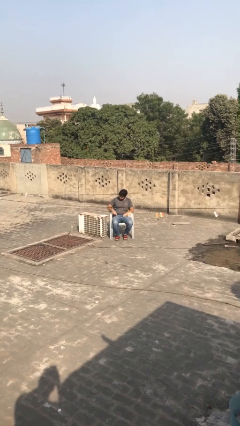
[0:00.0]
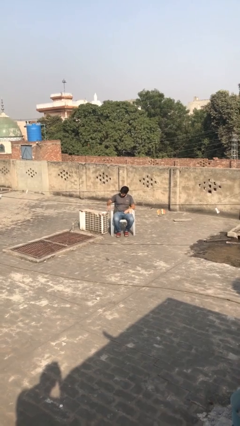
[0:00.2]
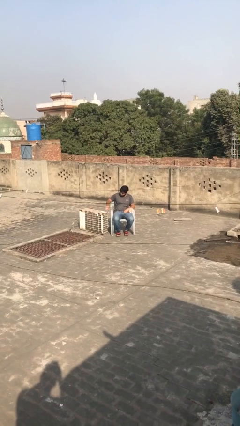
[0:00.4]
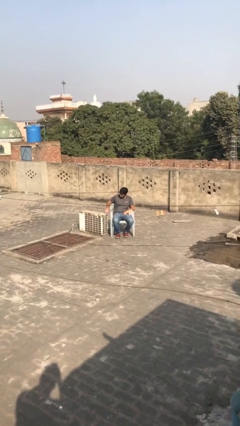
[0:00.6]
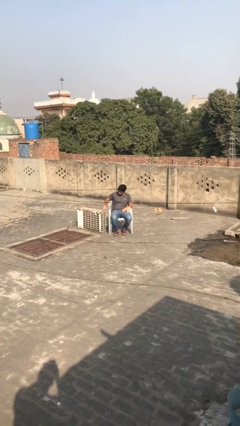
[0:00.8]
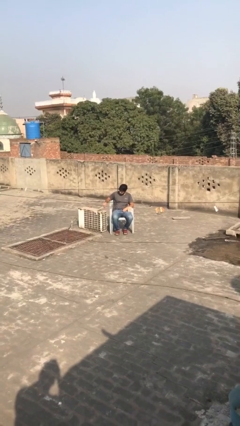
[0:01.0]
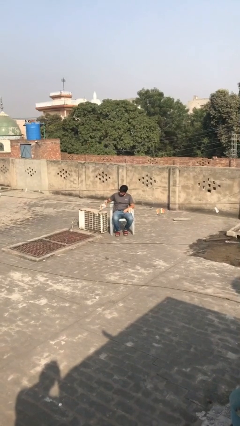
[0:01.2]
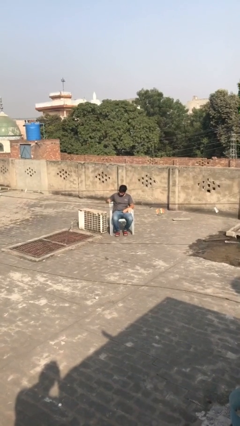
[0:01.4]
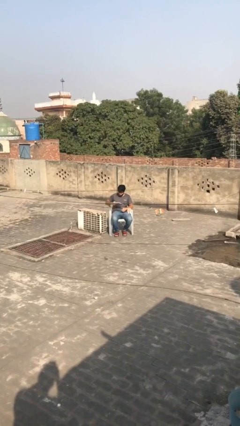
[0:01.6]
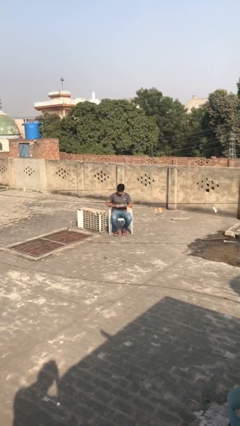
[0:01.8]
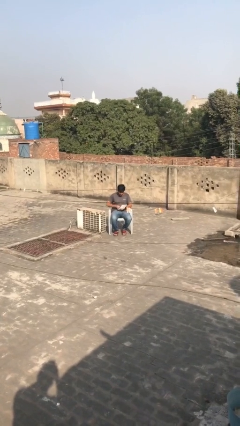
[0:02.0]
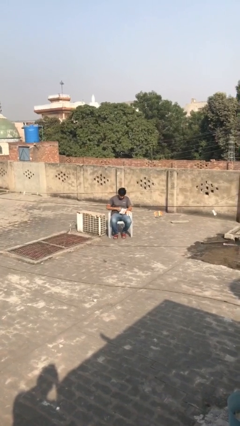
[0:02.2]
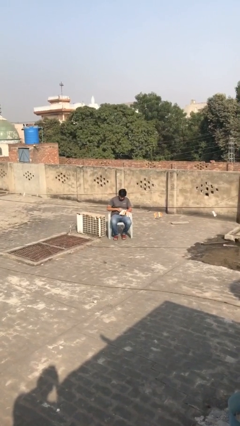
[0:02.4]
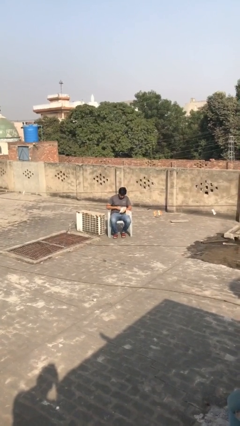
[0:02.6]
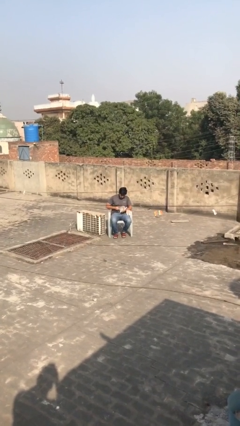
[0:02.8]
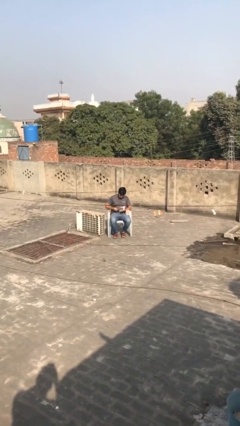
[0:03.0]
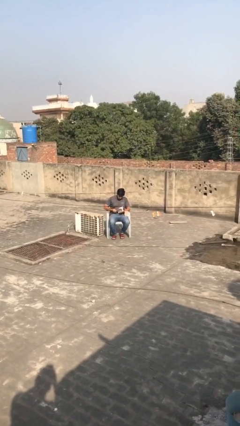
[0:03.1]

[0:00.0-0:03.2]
person picks up object from table

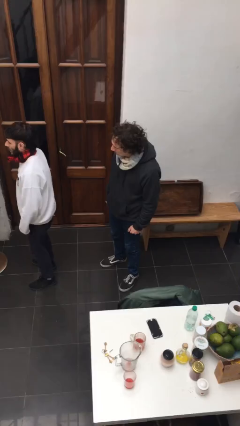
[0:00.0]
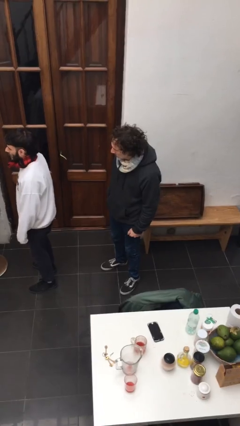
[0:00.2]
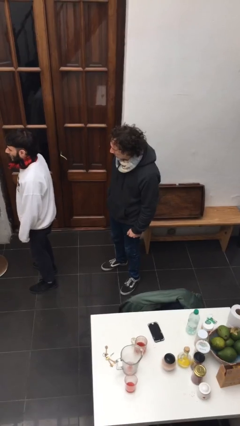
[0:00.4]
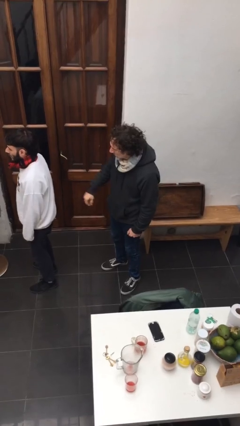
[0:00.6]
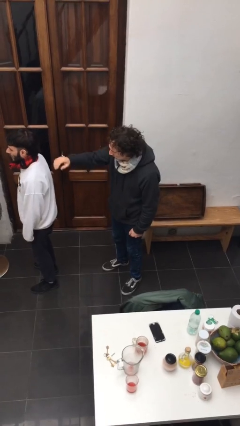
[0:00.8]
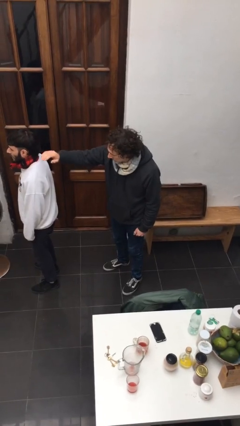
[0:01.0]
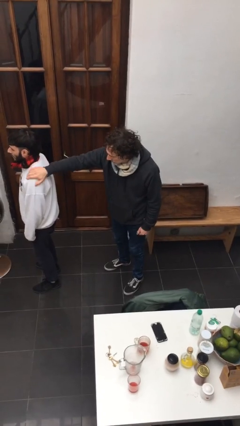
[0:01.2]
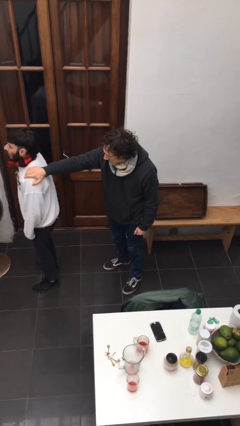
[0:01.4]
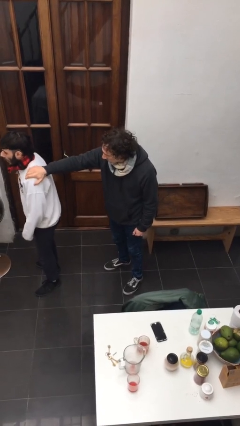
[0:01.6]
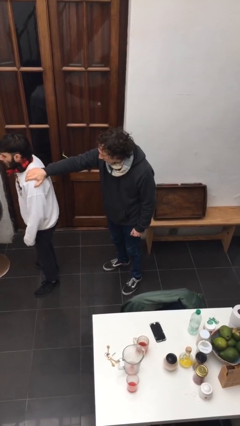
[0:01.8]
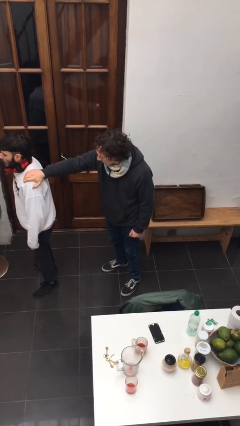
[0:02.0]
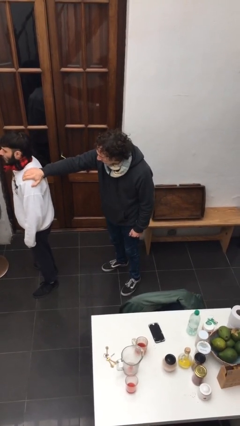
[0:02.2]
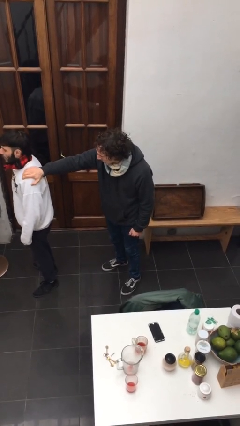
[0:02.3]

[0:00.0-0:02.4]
person grabs person by shoulder

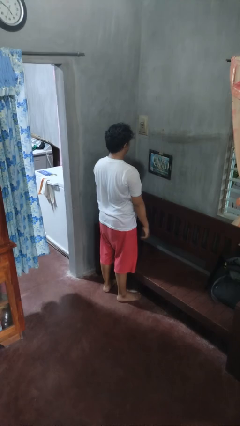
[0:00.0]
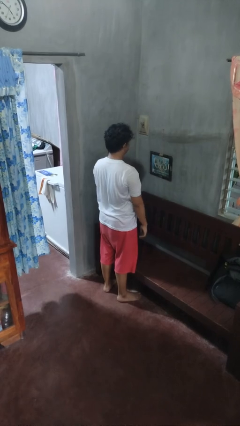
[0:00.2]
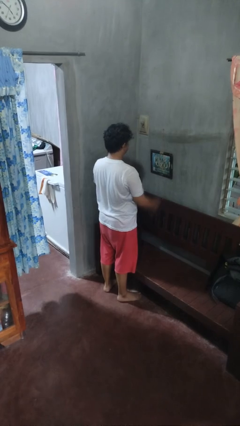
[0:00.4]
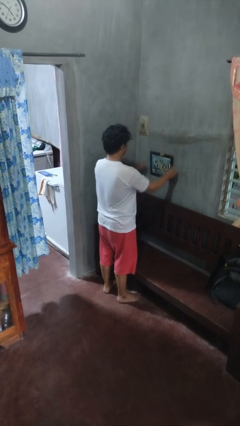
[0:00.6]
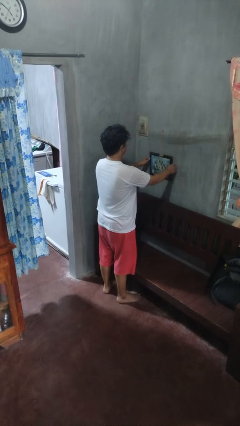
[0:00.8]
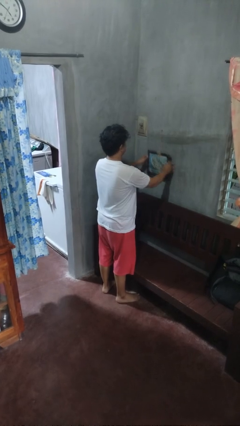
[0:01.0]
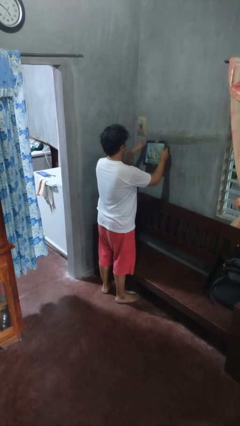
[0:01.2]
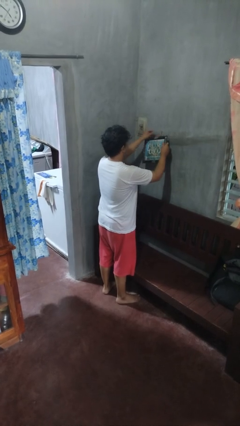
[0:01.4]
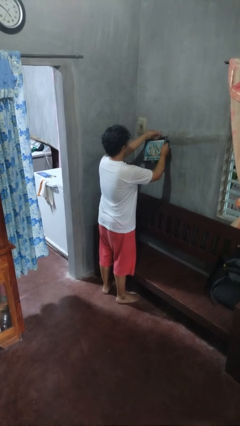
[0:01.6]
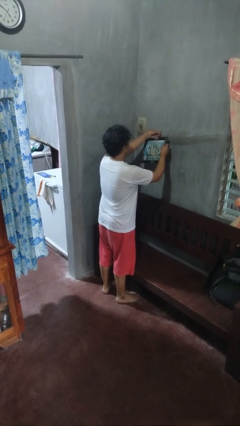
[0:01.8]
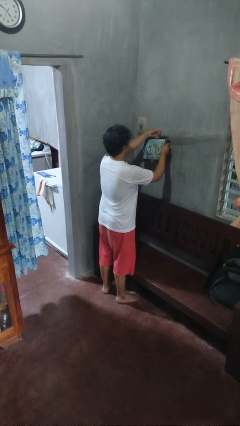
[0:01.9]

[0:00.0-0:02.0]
person takes down picture frame

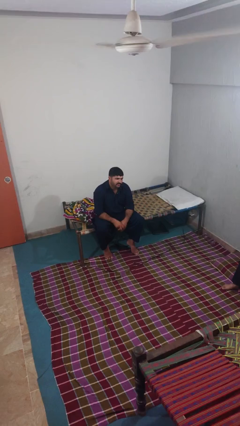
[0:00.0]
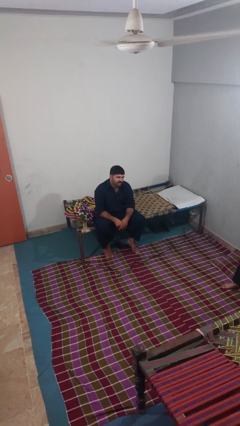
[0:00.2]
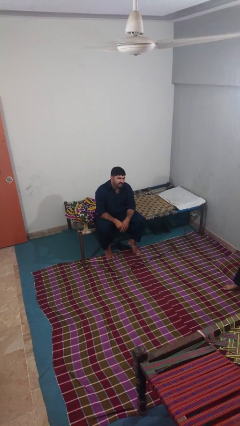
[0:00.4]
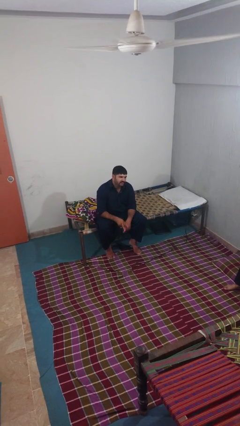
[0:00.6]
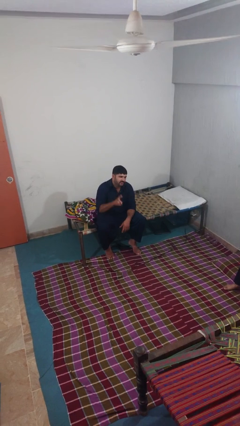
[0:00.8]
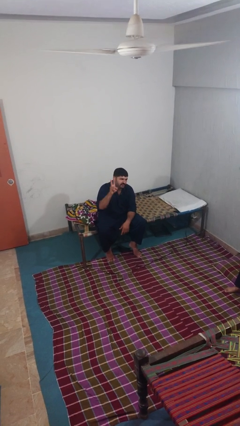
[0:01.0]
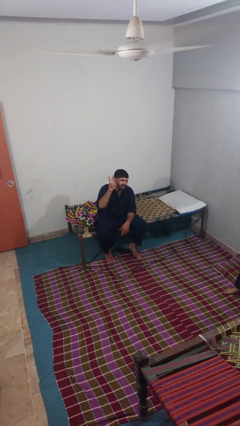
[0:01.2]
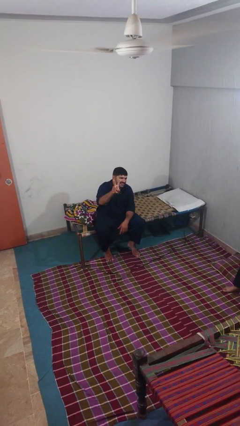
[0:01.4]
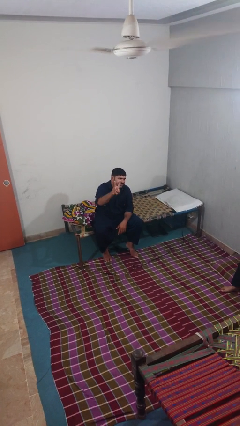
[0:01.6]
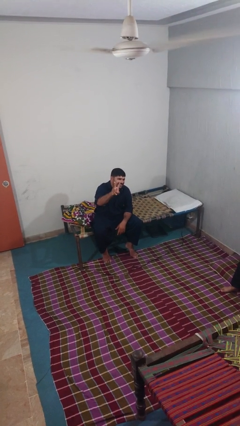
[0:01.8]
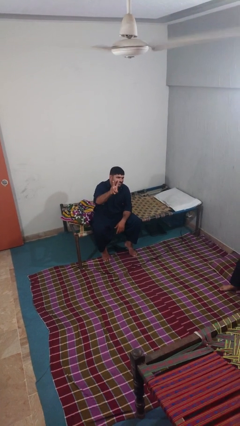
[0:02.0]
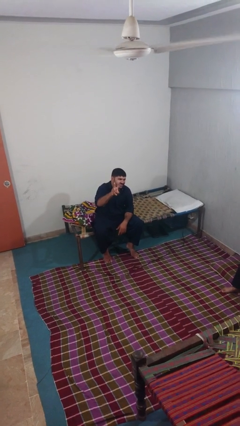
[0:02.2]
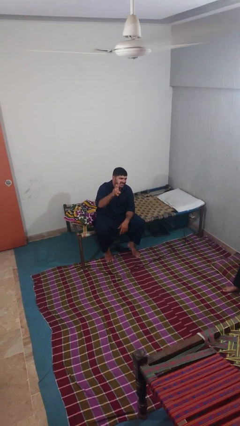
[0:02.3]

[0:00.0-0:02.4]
person gestures peace

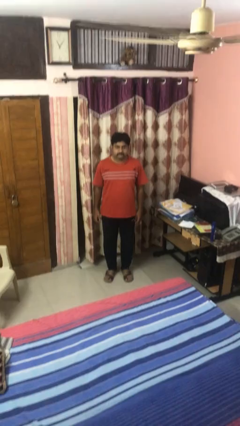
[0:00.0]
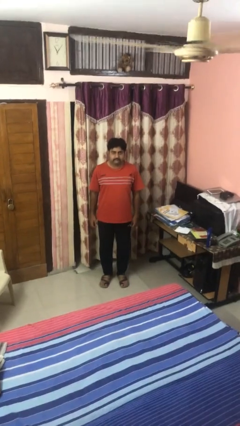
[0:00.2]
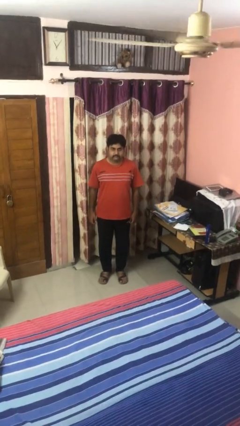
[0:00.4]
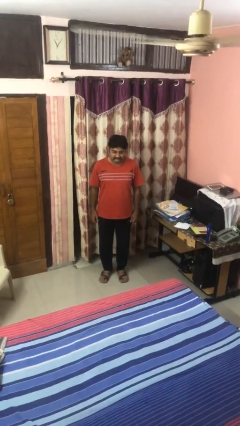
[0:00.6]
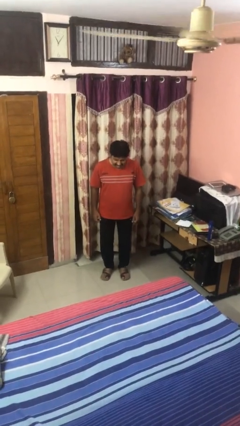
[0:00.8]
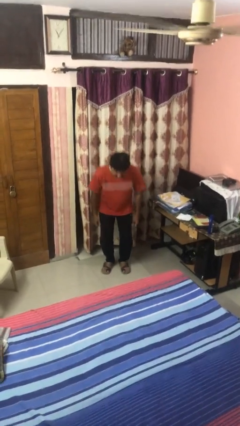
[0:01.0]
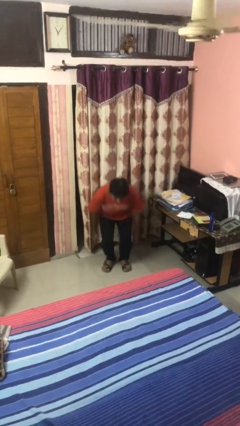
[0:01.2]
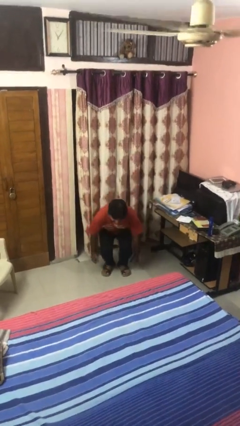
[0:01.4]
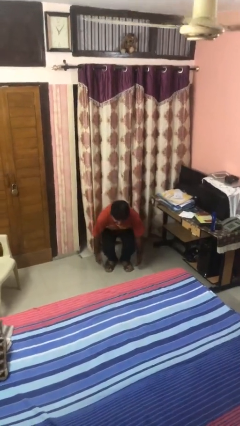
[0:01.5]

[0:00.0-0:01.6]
person squats

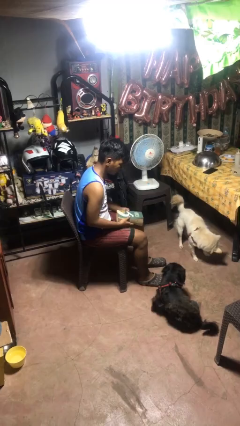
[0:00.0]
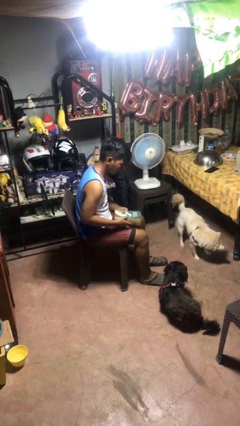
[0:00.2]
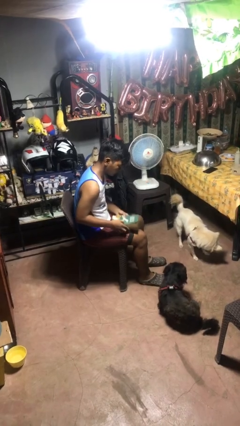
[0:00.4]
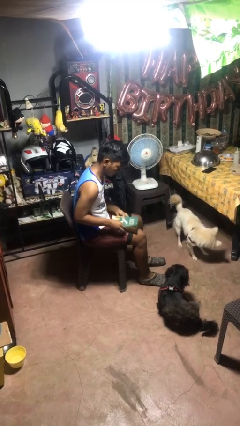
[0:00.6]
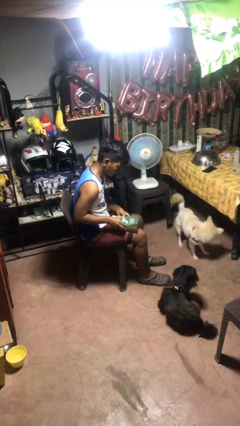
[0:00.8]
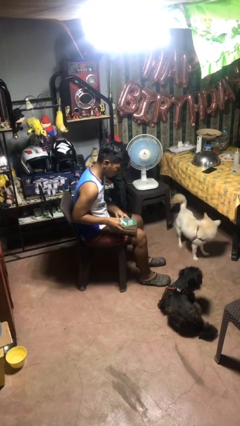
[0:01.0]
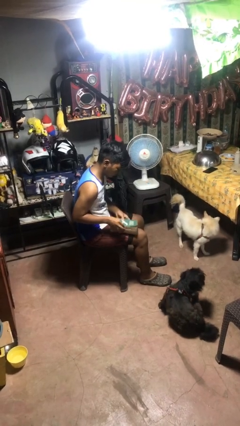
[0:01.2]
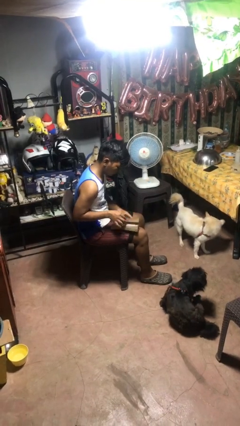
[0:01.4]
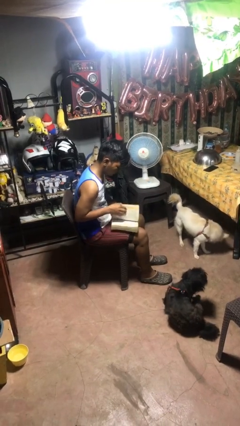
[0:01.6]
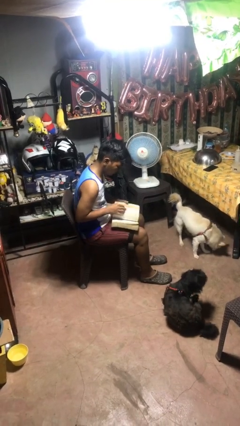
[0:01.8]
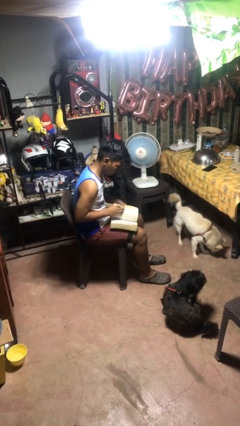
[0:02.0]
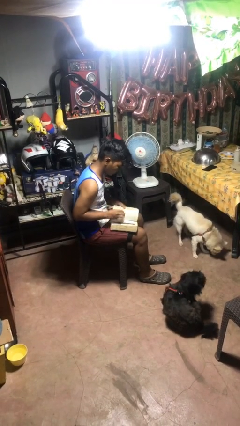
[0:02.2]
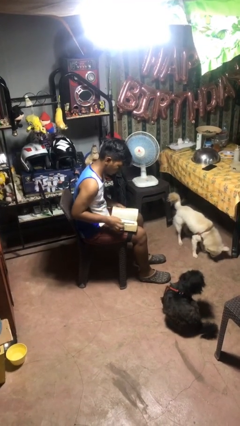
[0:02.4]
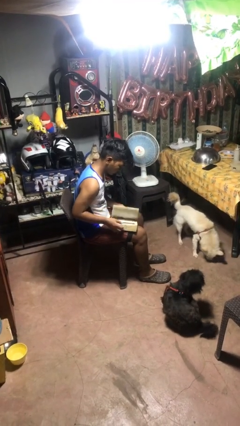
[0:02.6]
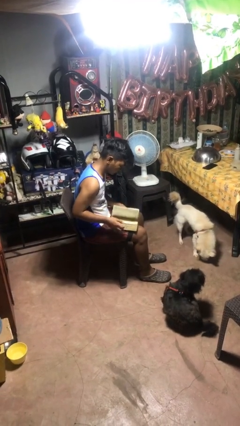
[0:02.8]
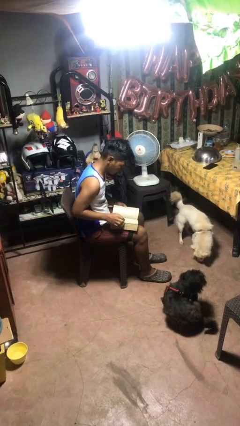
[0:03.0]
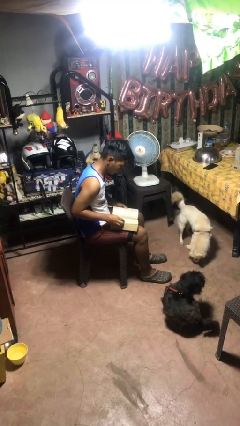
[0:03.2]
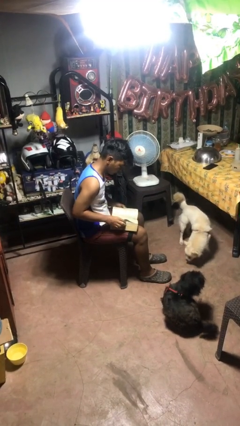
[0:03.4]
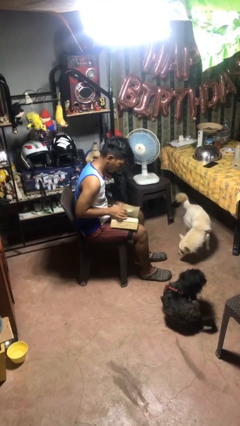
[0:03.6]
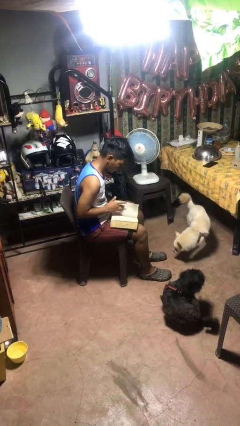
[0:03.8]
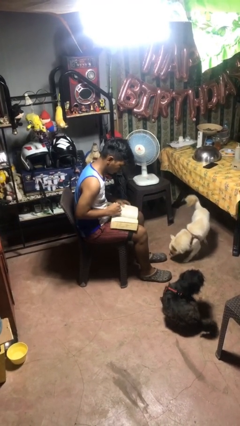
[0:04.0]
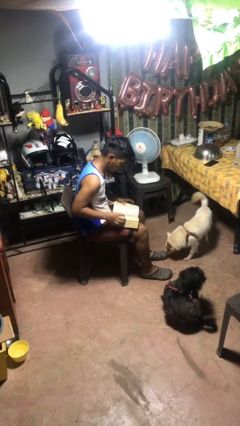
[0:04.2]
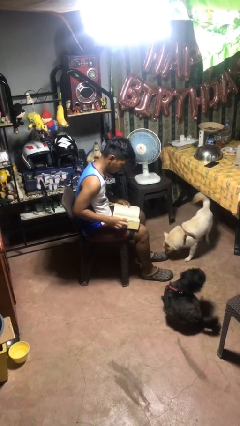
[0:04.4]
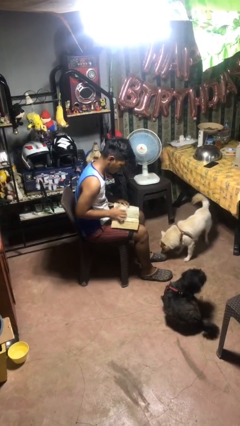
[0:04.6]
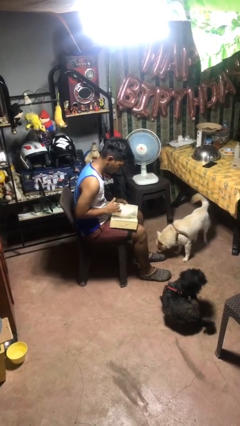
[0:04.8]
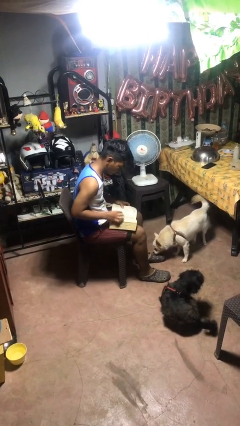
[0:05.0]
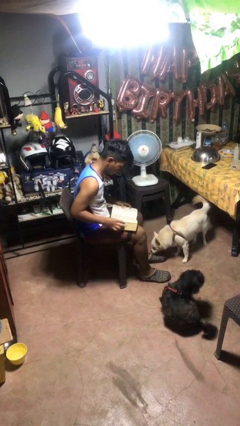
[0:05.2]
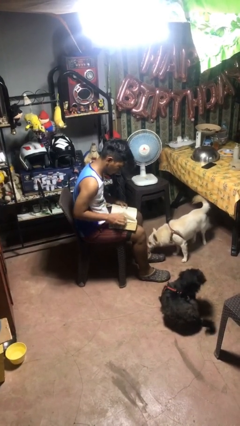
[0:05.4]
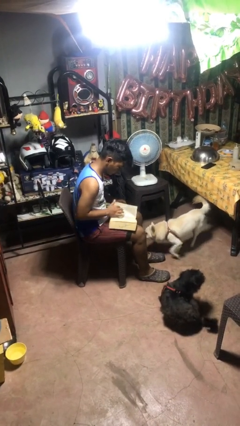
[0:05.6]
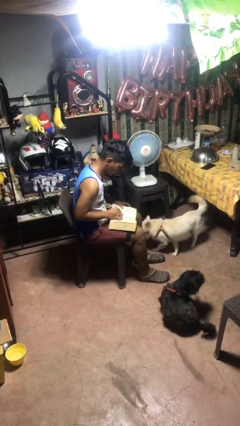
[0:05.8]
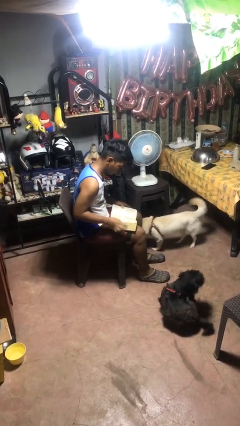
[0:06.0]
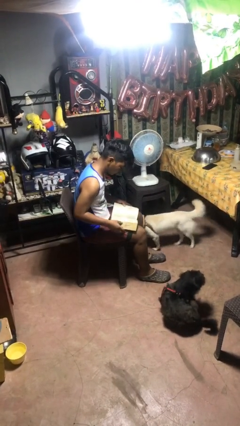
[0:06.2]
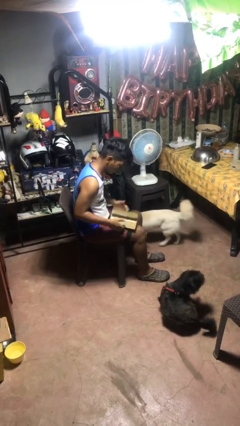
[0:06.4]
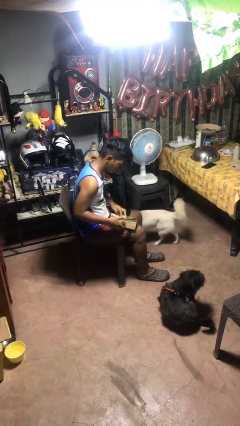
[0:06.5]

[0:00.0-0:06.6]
person reads book
